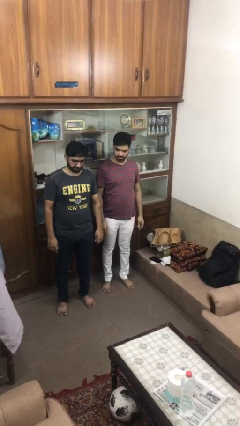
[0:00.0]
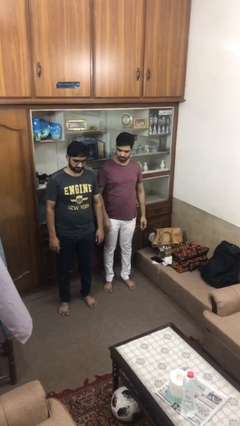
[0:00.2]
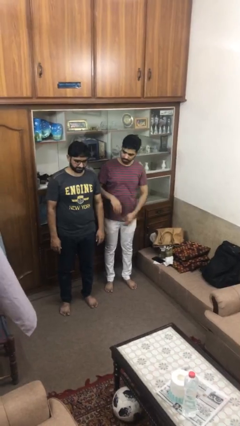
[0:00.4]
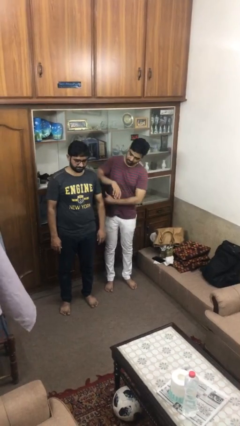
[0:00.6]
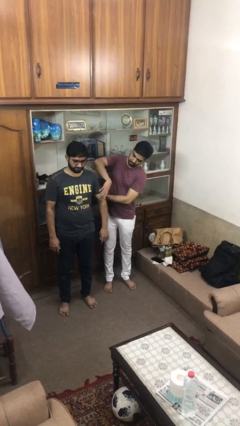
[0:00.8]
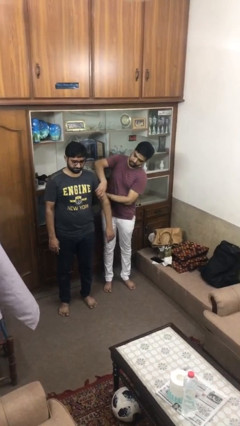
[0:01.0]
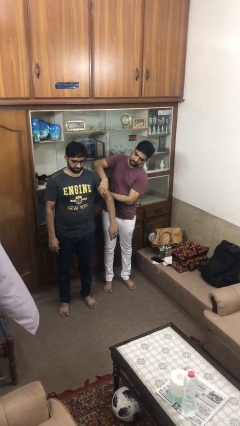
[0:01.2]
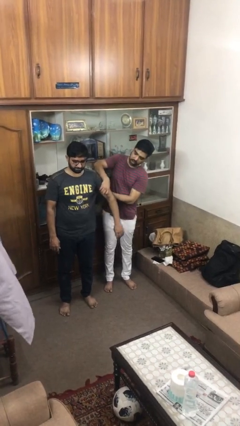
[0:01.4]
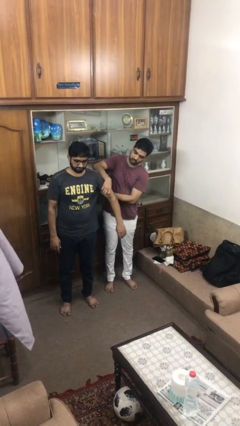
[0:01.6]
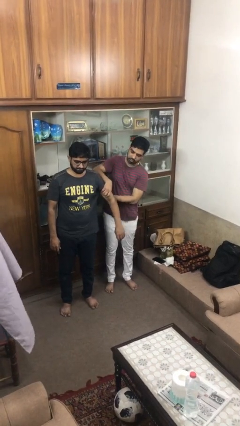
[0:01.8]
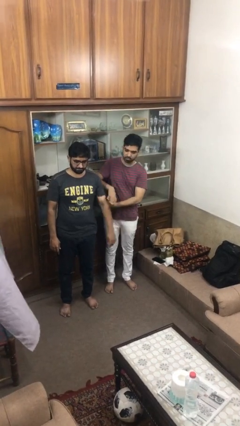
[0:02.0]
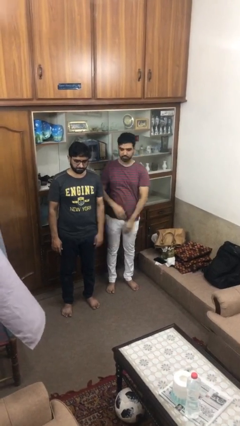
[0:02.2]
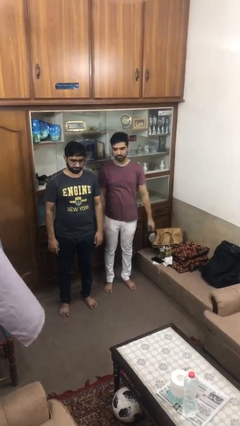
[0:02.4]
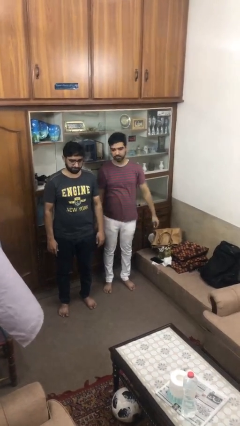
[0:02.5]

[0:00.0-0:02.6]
person grabs person by bicep

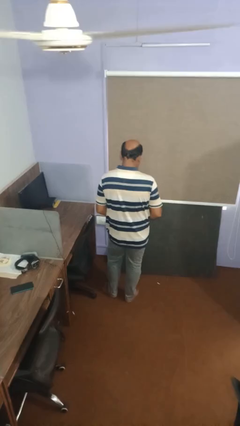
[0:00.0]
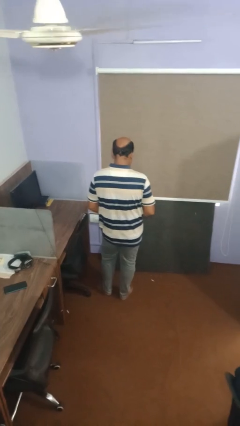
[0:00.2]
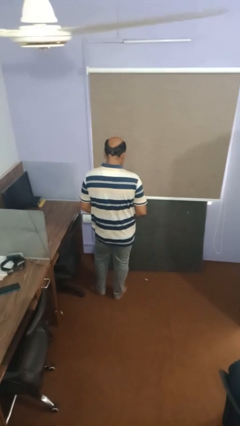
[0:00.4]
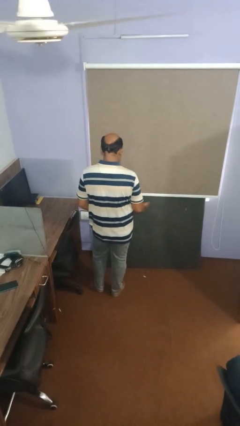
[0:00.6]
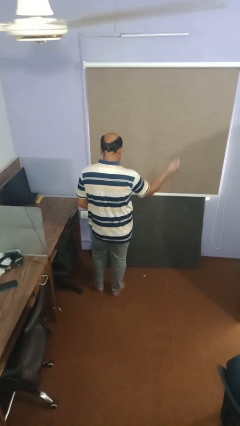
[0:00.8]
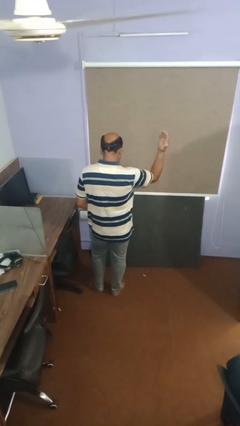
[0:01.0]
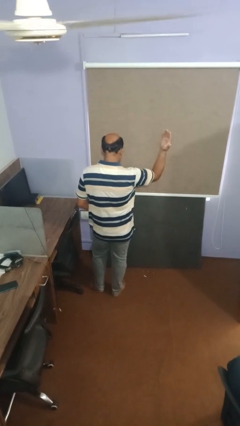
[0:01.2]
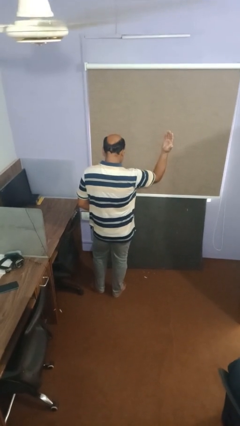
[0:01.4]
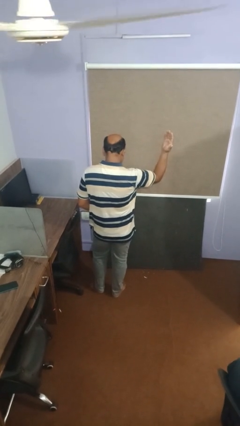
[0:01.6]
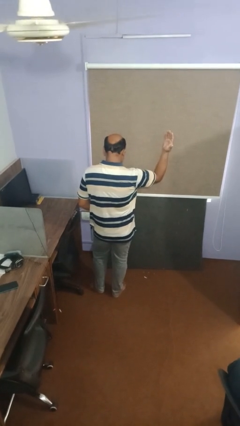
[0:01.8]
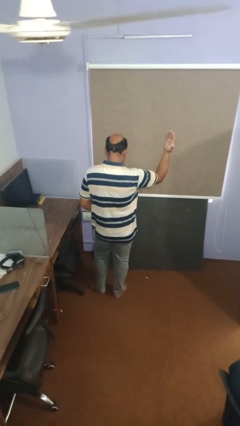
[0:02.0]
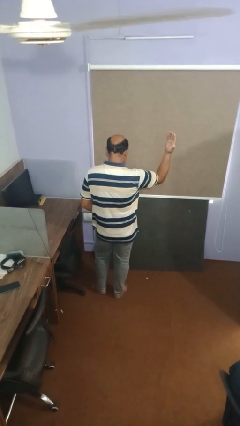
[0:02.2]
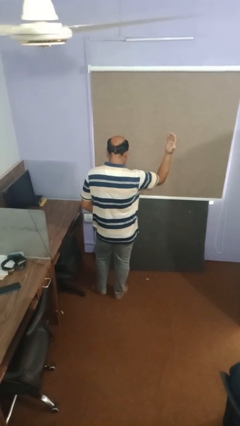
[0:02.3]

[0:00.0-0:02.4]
person gestures swipe right

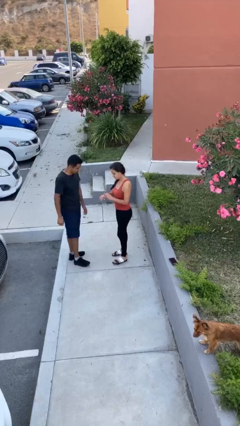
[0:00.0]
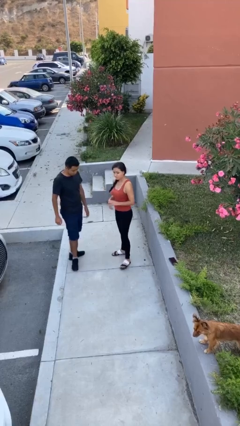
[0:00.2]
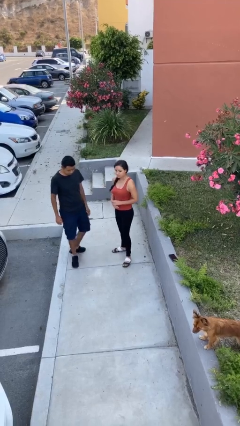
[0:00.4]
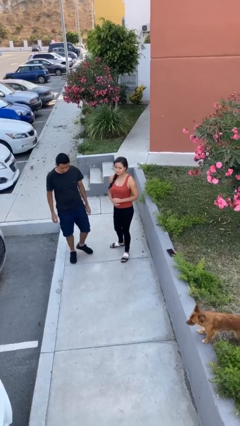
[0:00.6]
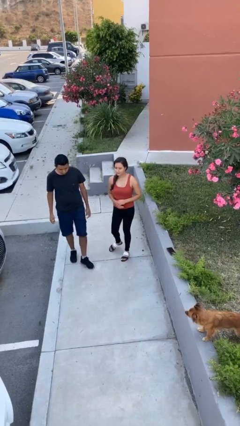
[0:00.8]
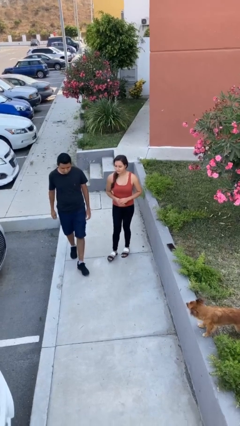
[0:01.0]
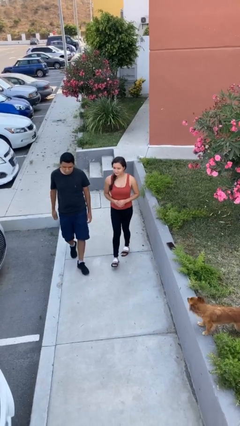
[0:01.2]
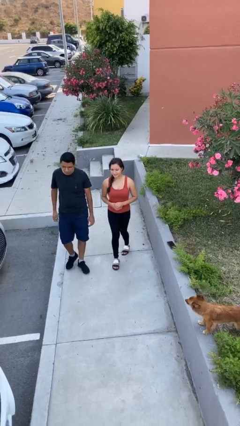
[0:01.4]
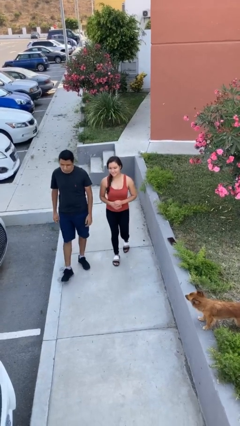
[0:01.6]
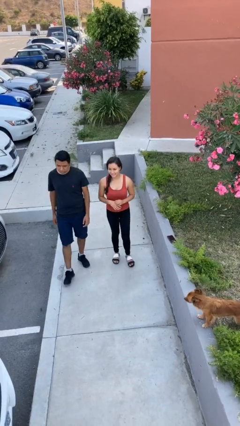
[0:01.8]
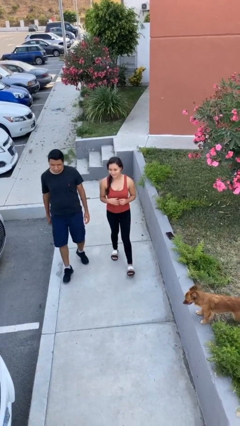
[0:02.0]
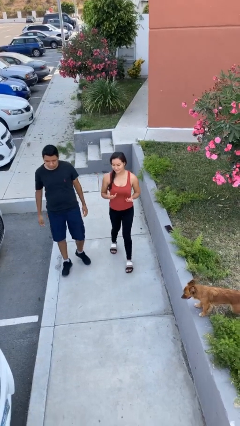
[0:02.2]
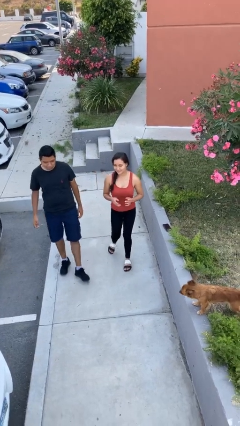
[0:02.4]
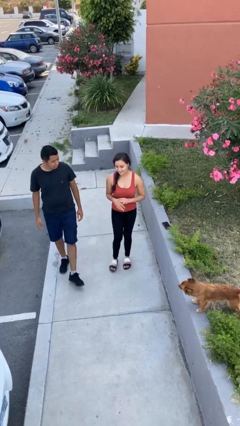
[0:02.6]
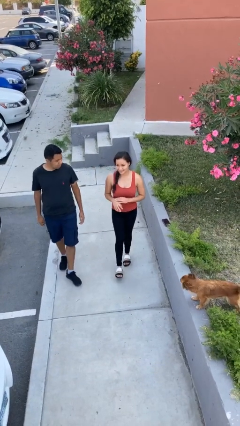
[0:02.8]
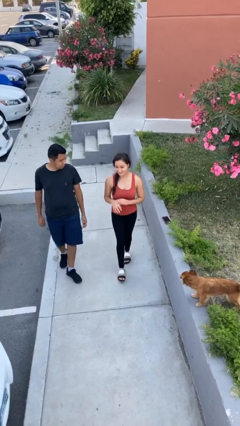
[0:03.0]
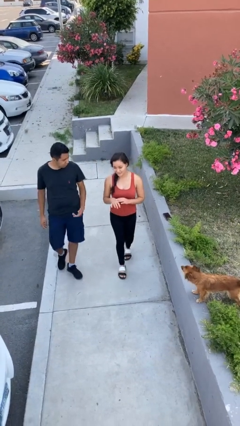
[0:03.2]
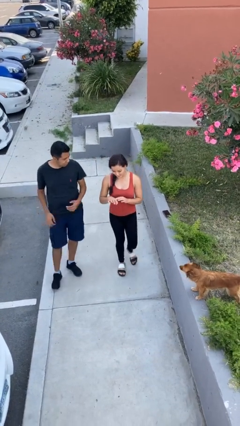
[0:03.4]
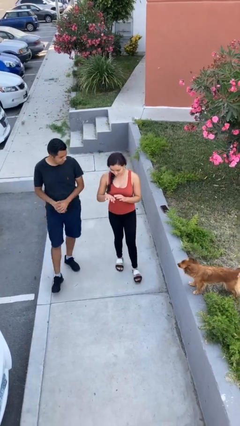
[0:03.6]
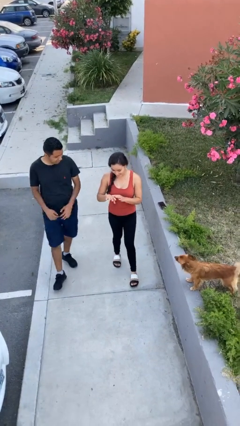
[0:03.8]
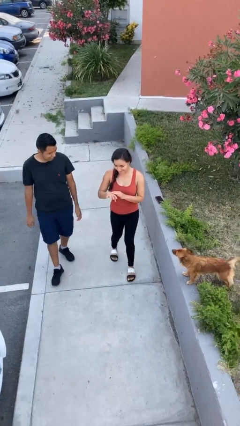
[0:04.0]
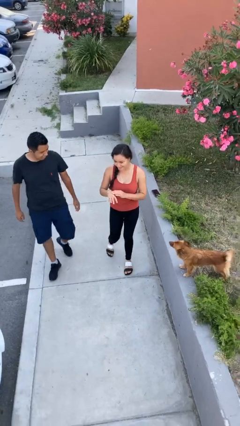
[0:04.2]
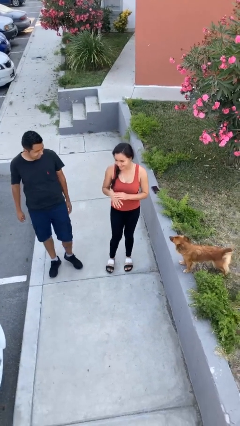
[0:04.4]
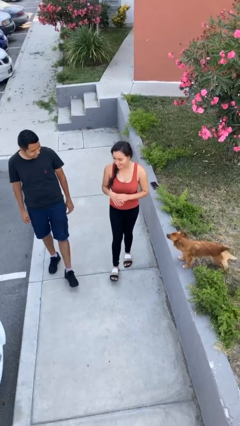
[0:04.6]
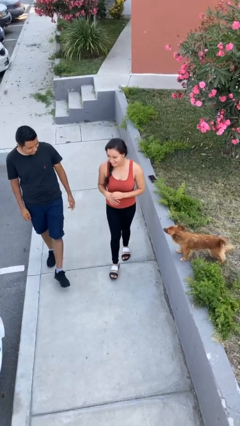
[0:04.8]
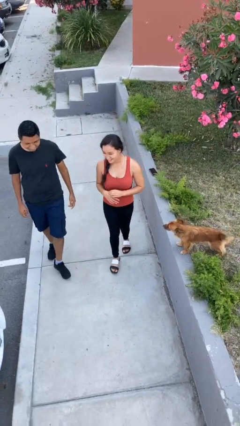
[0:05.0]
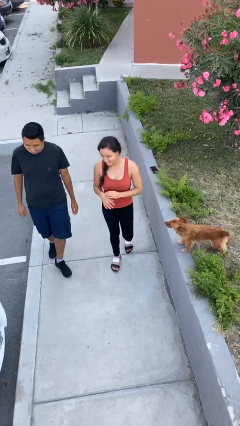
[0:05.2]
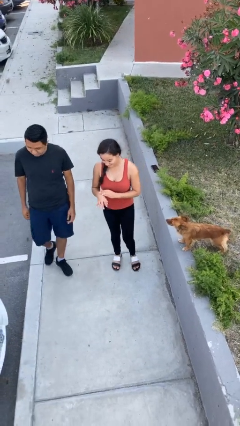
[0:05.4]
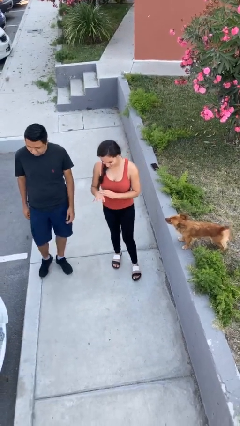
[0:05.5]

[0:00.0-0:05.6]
person talks to person

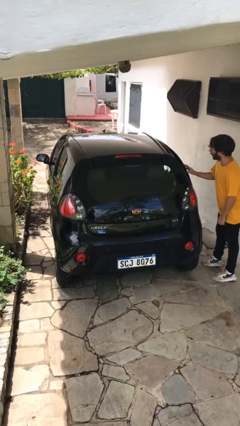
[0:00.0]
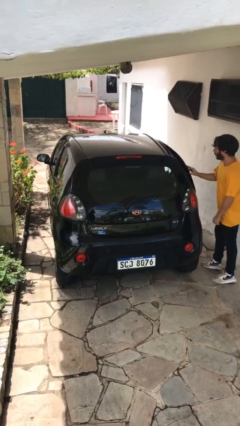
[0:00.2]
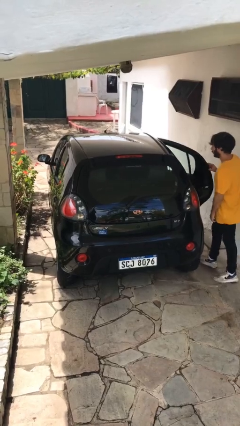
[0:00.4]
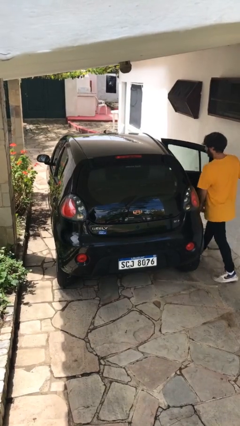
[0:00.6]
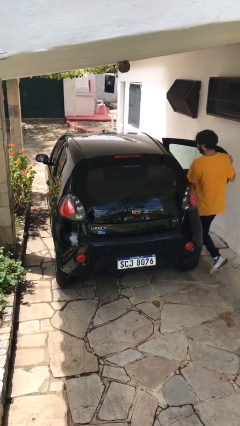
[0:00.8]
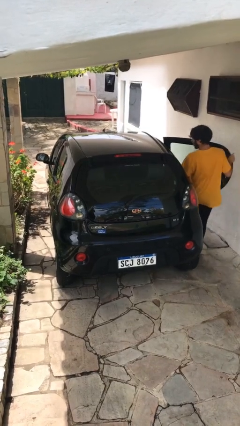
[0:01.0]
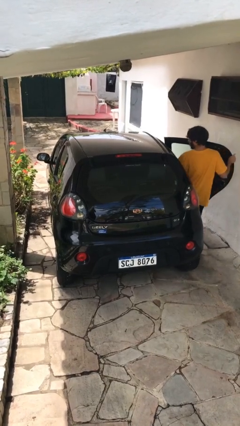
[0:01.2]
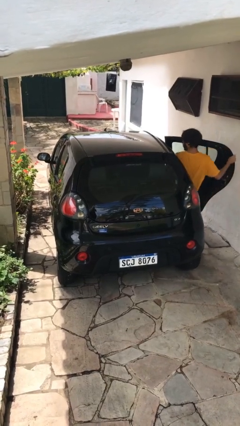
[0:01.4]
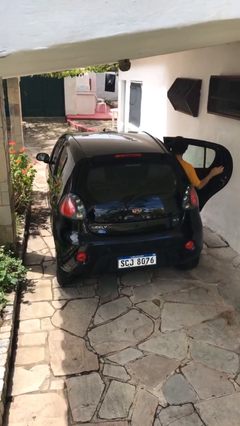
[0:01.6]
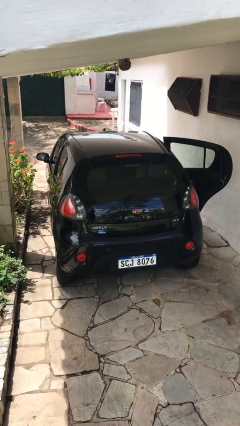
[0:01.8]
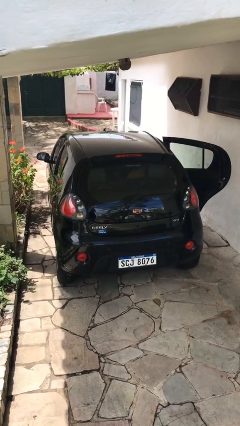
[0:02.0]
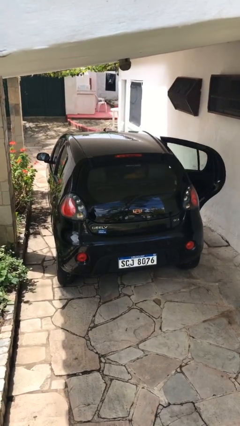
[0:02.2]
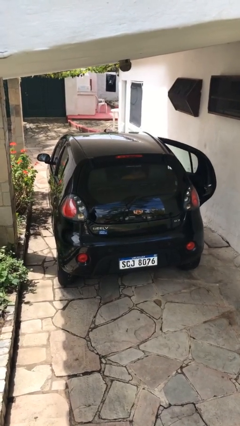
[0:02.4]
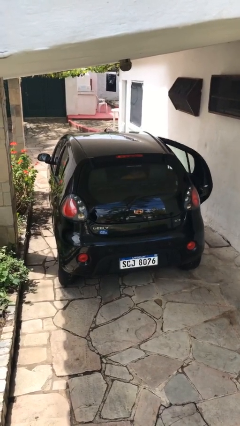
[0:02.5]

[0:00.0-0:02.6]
car picks up person

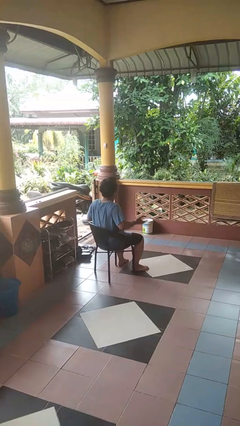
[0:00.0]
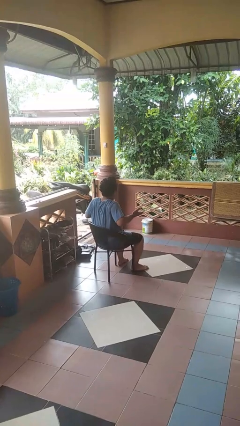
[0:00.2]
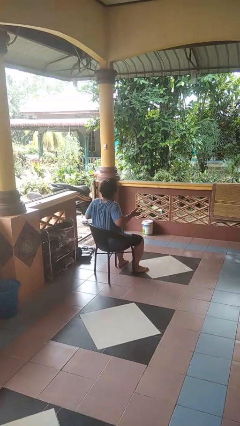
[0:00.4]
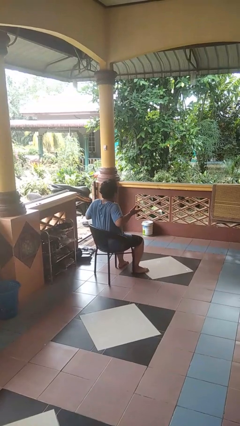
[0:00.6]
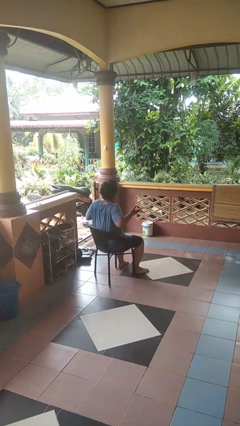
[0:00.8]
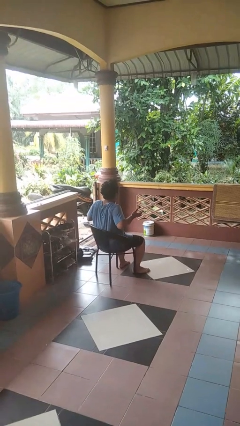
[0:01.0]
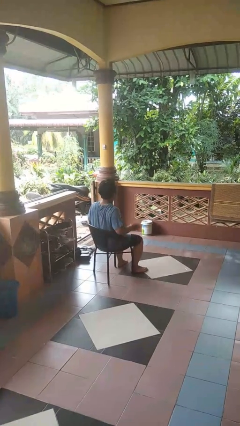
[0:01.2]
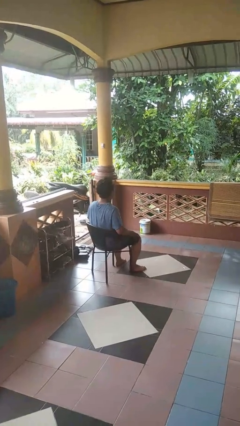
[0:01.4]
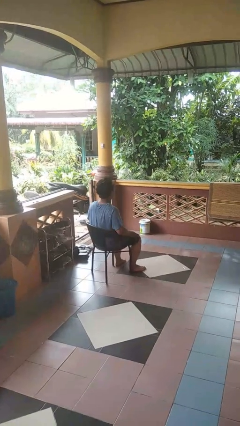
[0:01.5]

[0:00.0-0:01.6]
person shrugs

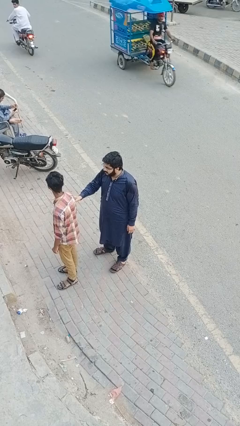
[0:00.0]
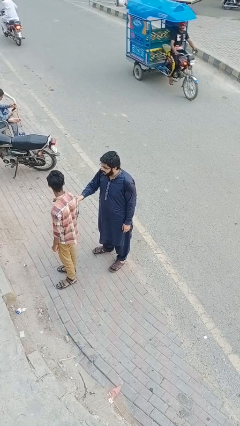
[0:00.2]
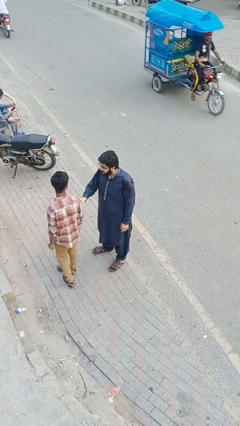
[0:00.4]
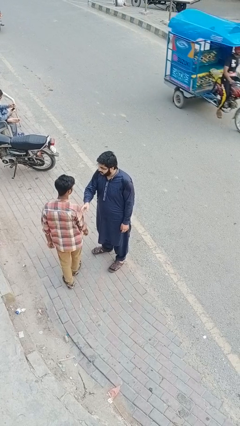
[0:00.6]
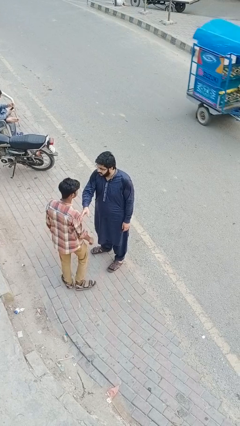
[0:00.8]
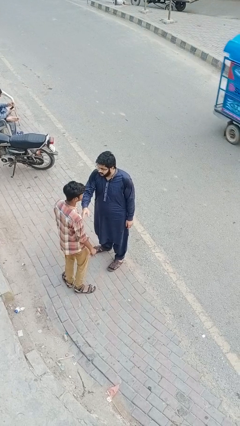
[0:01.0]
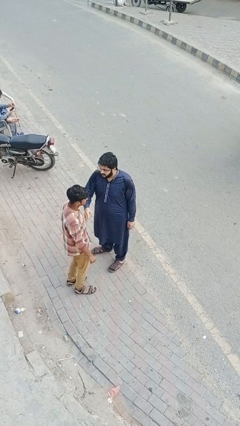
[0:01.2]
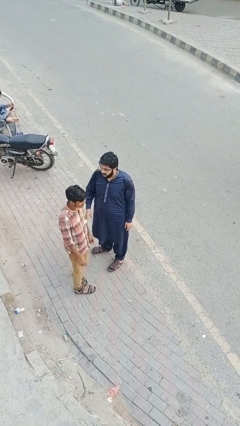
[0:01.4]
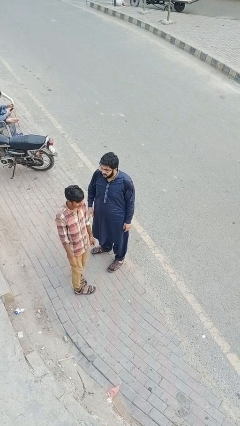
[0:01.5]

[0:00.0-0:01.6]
person spins person around

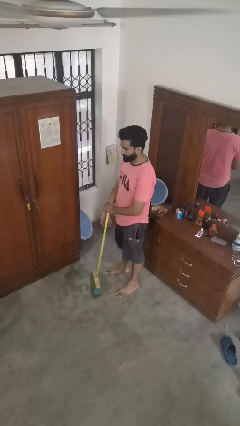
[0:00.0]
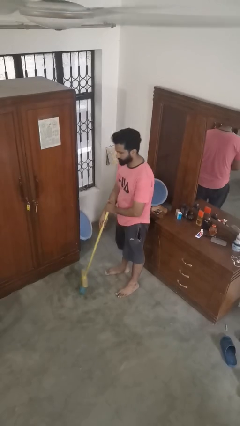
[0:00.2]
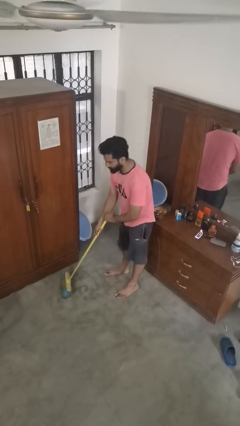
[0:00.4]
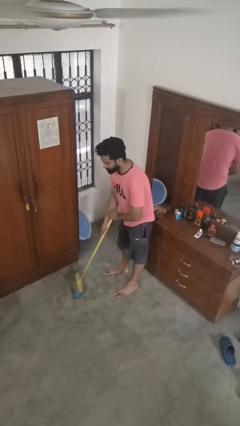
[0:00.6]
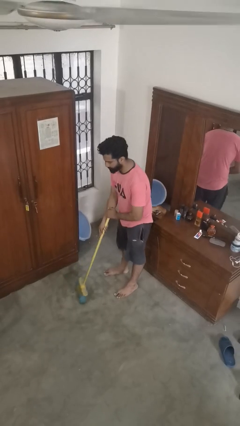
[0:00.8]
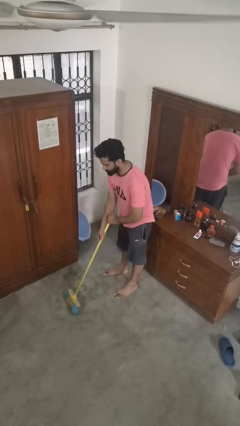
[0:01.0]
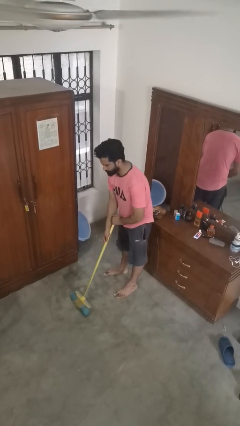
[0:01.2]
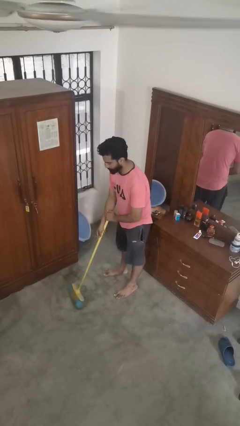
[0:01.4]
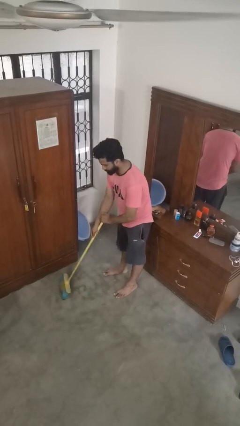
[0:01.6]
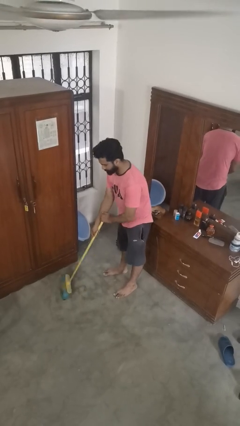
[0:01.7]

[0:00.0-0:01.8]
person sweeps floor
